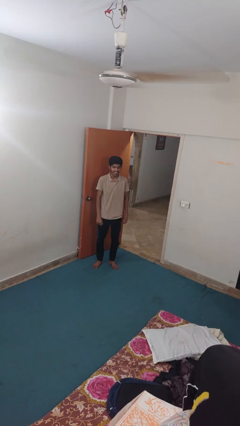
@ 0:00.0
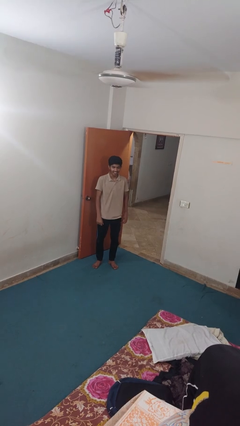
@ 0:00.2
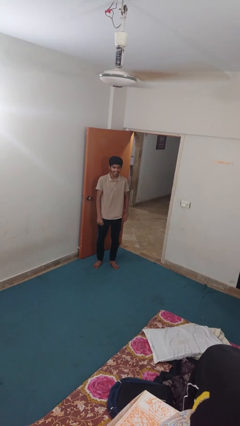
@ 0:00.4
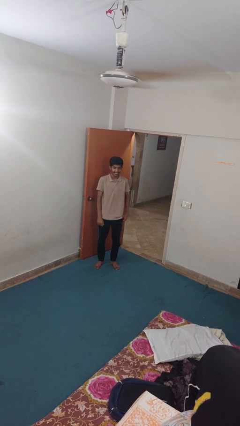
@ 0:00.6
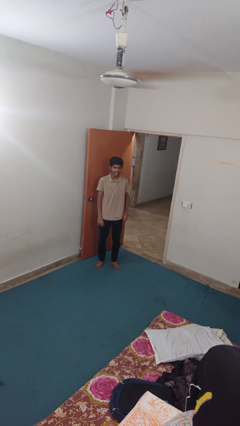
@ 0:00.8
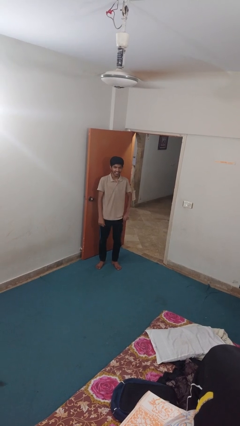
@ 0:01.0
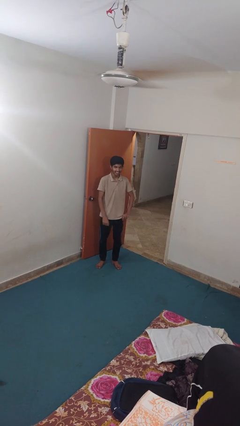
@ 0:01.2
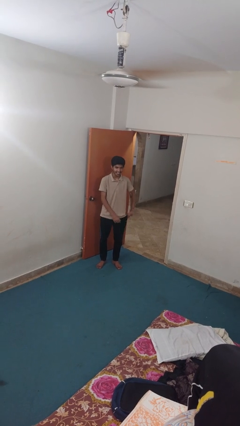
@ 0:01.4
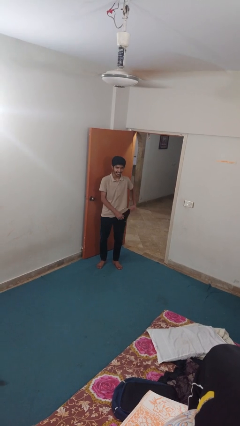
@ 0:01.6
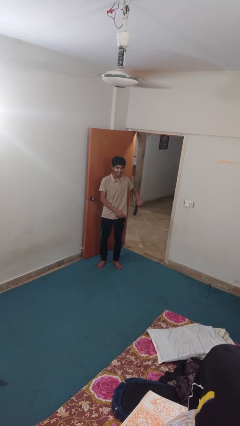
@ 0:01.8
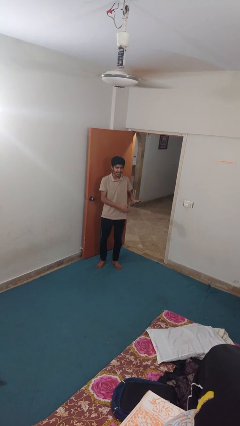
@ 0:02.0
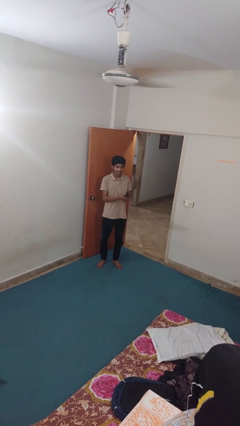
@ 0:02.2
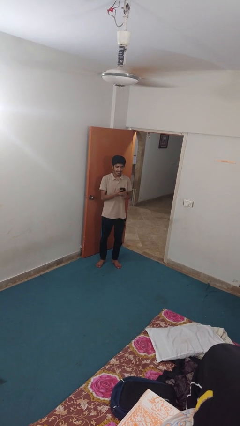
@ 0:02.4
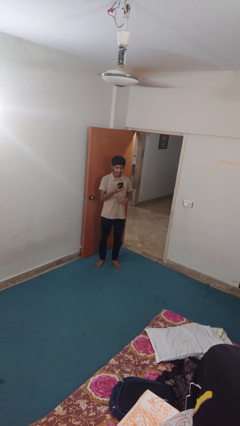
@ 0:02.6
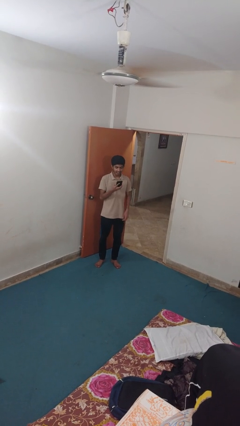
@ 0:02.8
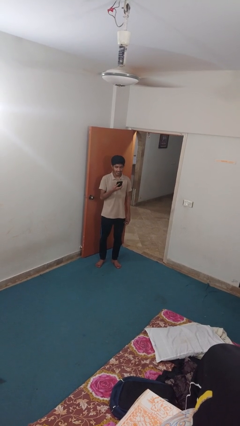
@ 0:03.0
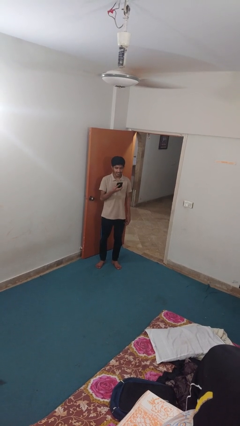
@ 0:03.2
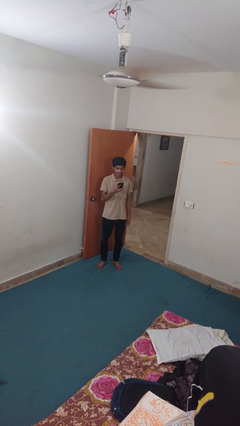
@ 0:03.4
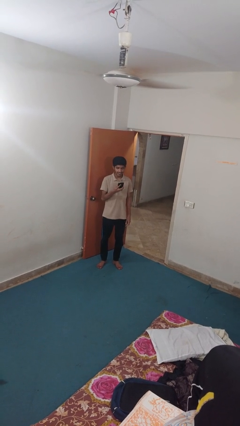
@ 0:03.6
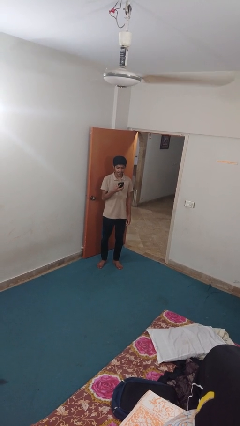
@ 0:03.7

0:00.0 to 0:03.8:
person takes phone from pocket

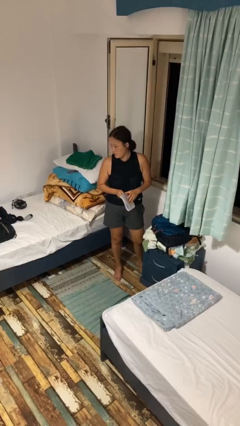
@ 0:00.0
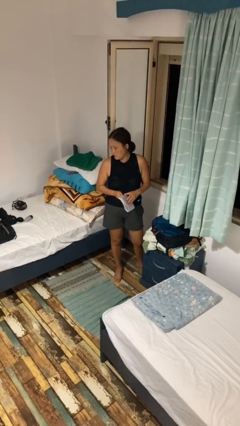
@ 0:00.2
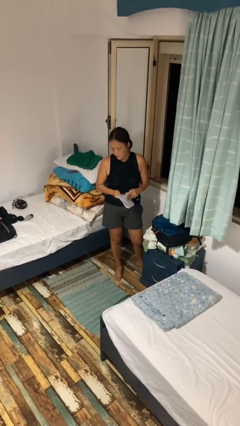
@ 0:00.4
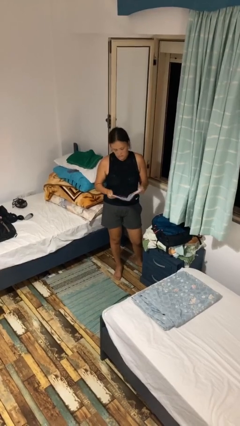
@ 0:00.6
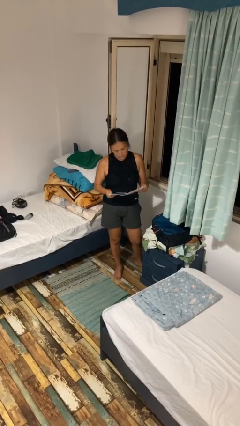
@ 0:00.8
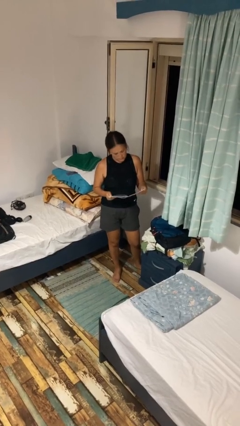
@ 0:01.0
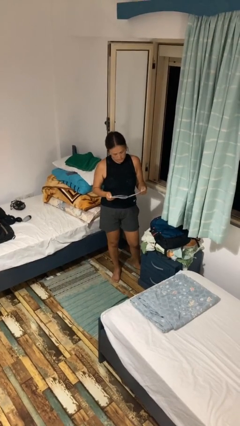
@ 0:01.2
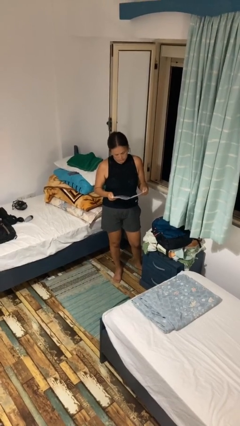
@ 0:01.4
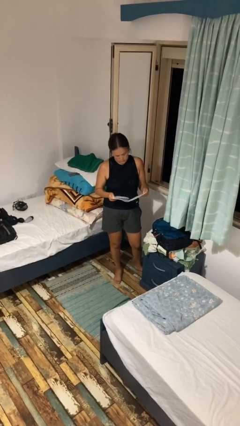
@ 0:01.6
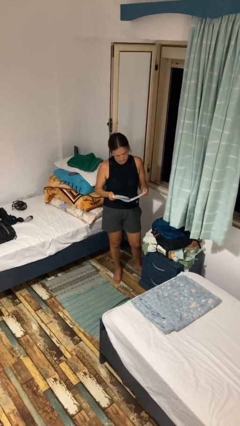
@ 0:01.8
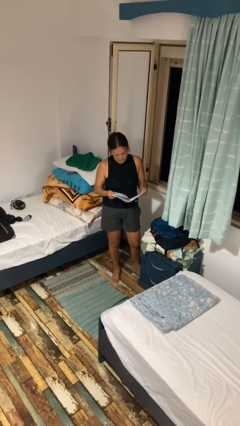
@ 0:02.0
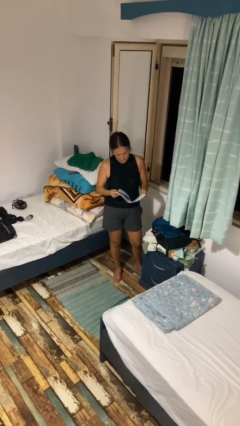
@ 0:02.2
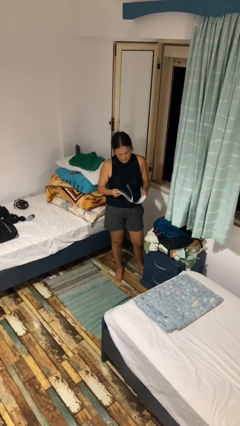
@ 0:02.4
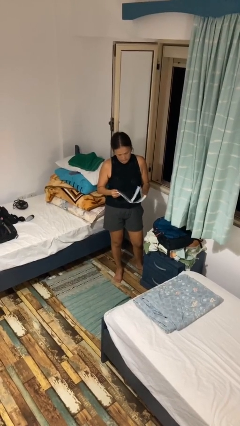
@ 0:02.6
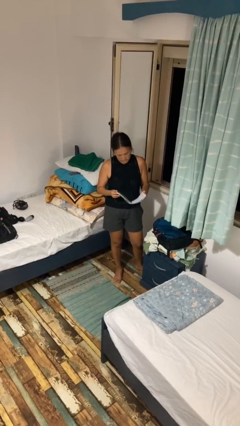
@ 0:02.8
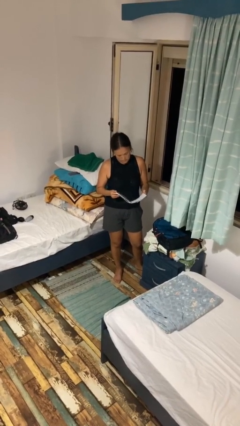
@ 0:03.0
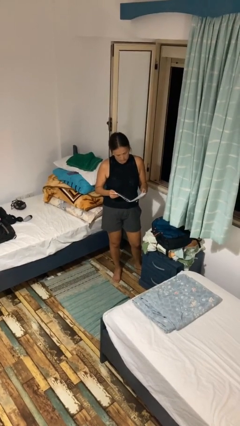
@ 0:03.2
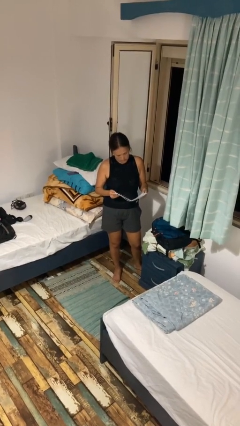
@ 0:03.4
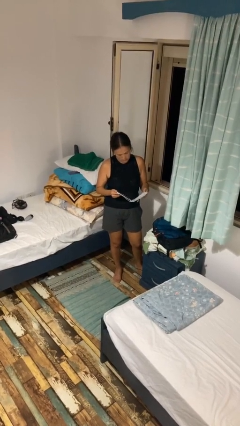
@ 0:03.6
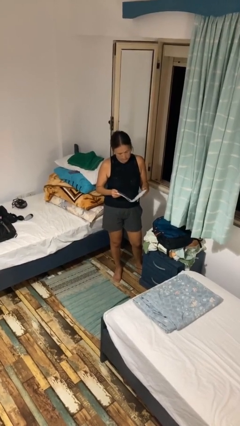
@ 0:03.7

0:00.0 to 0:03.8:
person reads book

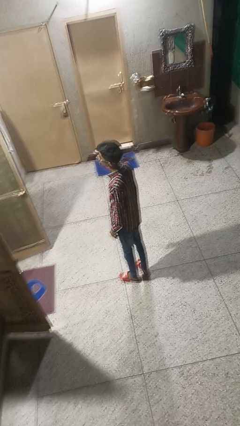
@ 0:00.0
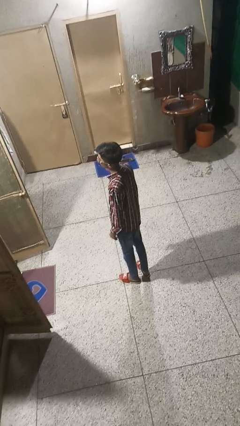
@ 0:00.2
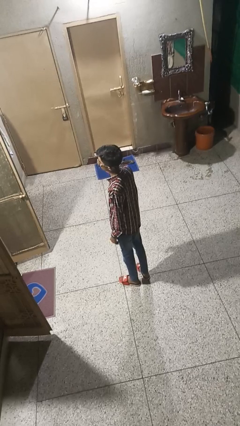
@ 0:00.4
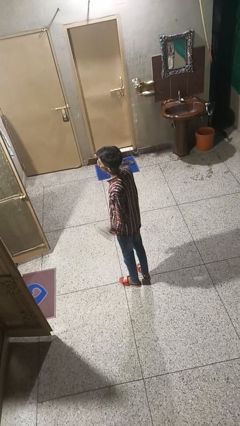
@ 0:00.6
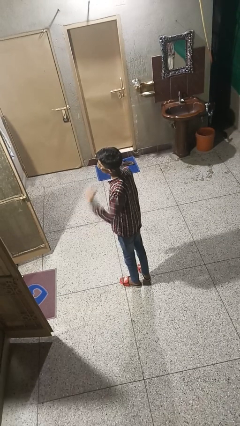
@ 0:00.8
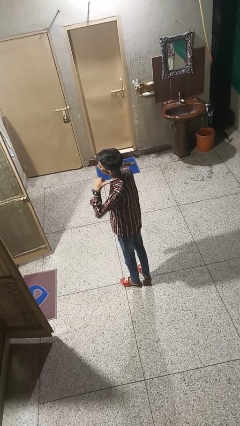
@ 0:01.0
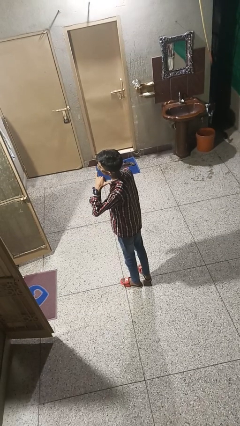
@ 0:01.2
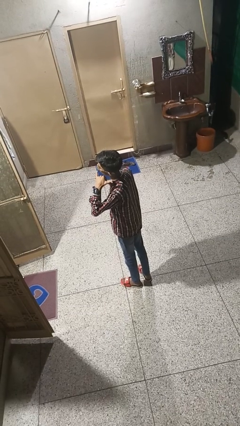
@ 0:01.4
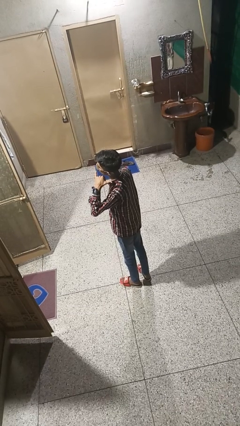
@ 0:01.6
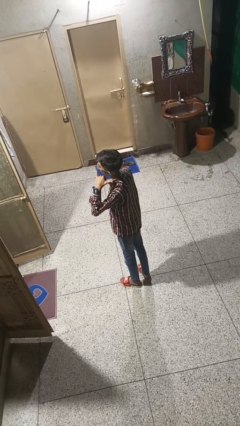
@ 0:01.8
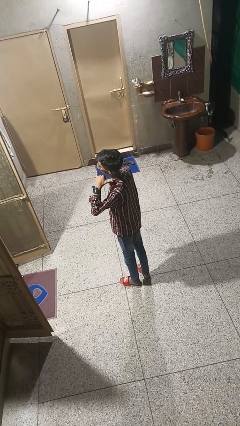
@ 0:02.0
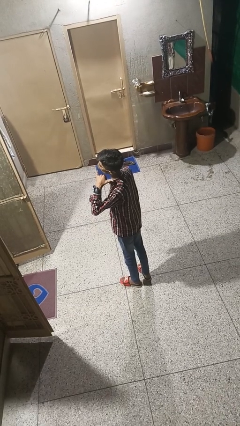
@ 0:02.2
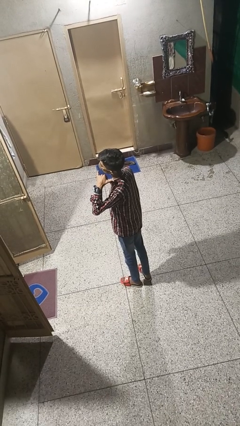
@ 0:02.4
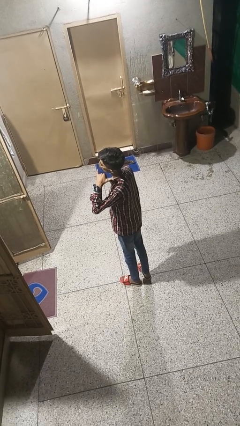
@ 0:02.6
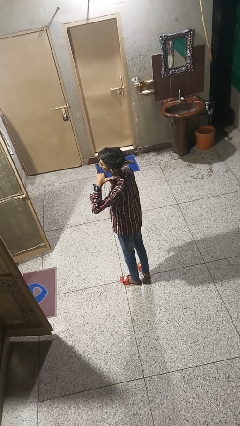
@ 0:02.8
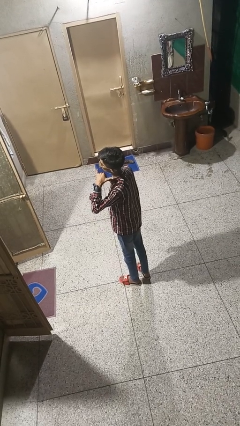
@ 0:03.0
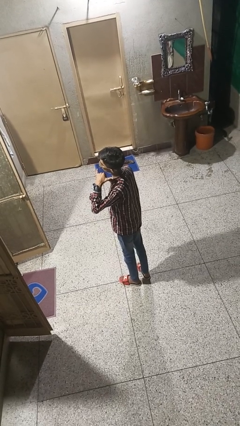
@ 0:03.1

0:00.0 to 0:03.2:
person gestures call me

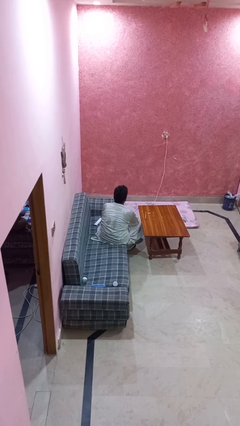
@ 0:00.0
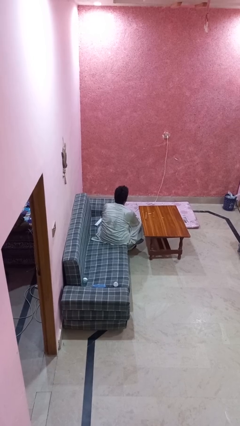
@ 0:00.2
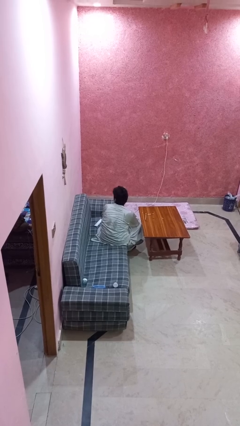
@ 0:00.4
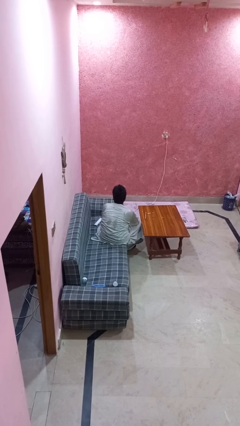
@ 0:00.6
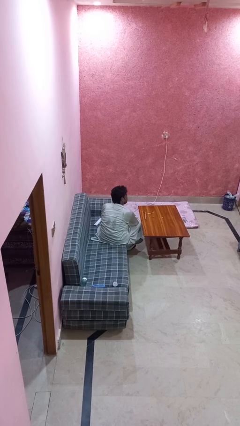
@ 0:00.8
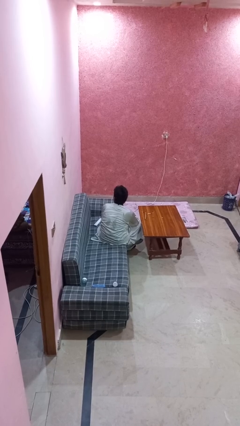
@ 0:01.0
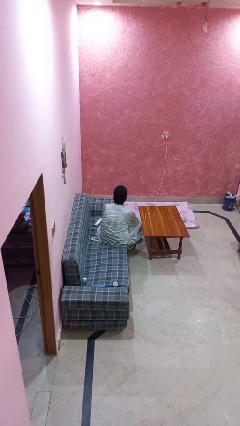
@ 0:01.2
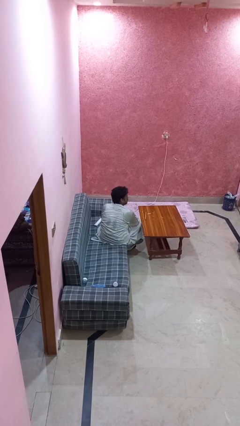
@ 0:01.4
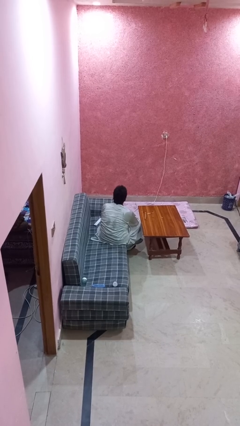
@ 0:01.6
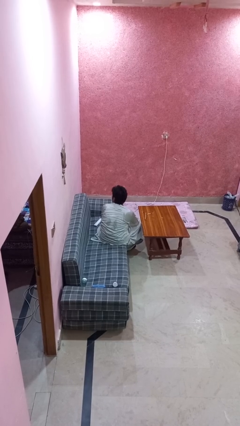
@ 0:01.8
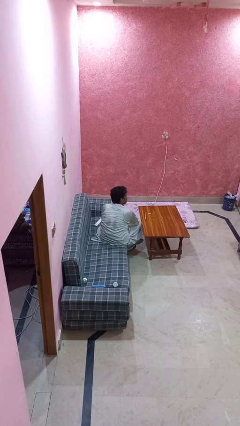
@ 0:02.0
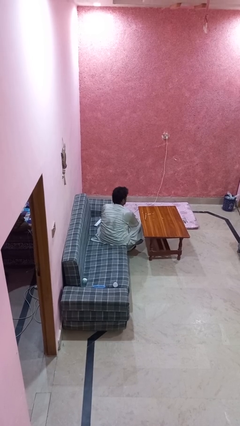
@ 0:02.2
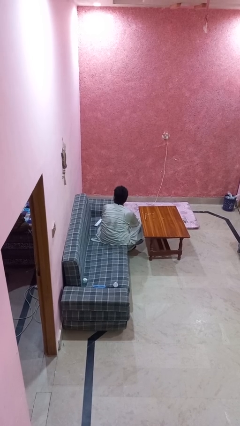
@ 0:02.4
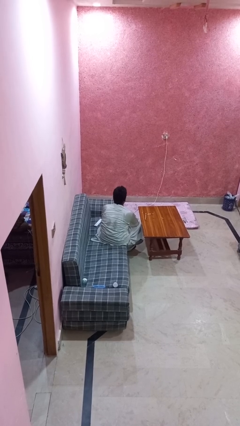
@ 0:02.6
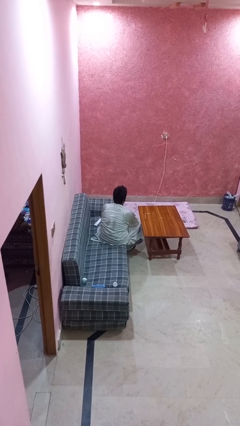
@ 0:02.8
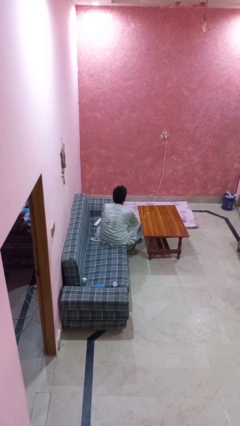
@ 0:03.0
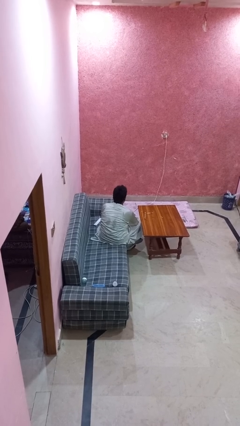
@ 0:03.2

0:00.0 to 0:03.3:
person shakes head

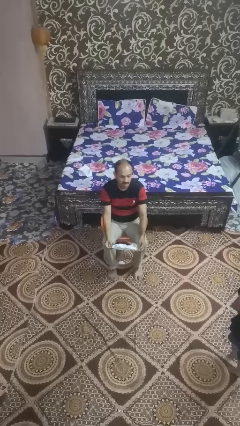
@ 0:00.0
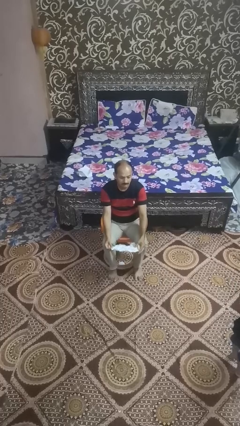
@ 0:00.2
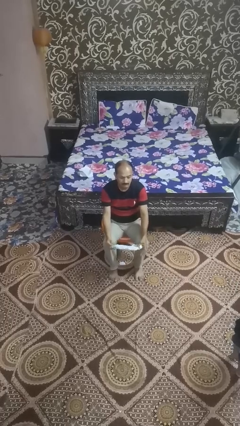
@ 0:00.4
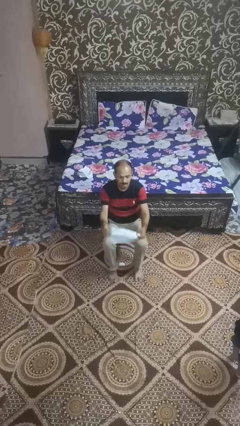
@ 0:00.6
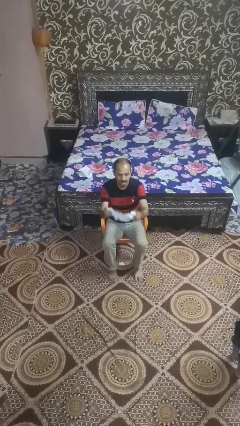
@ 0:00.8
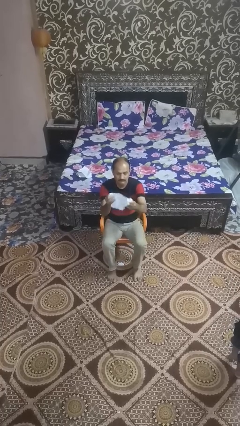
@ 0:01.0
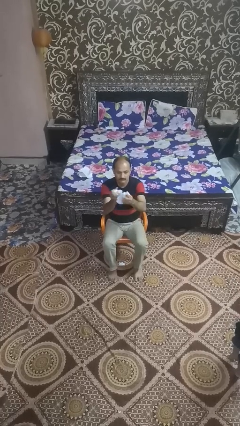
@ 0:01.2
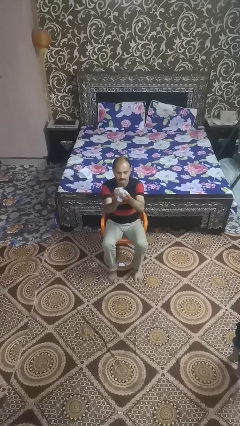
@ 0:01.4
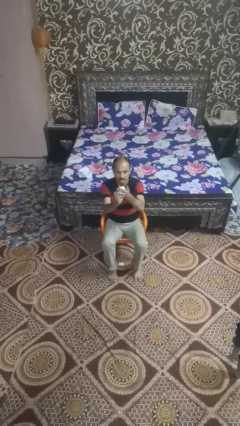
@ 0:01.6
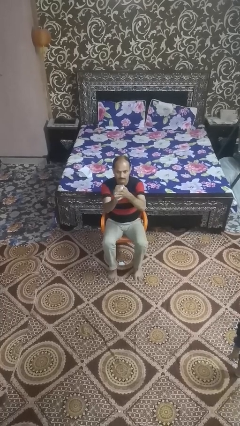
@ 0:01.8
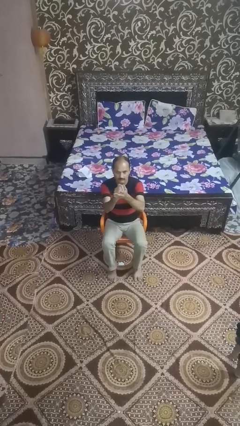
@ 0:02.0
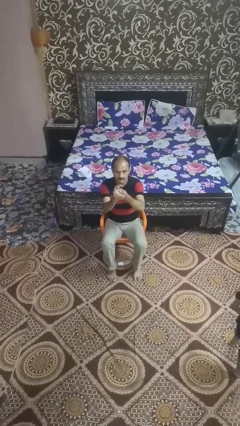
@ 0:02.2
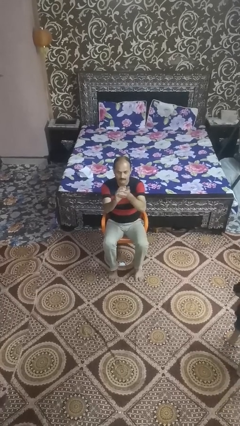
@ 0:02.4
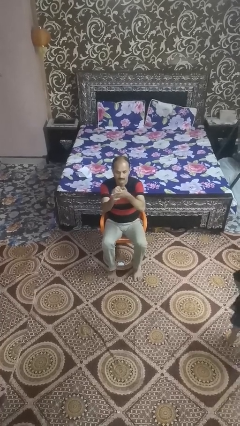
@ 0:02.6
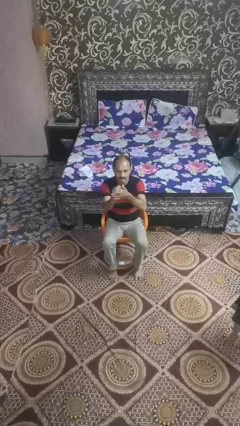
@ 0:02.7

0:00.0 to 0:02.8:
person crumples paper

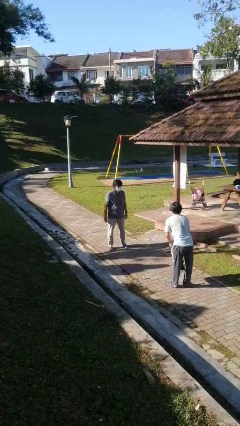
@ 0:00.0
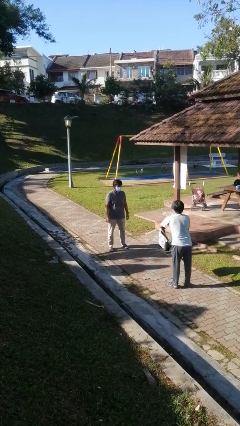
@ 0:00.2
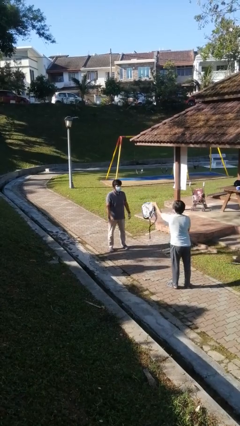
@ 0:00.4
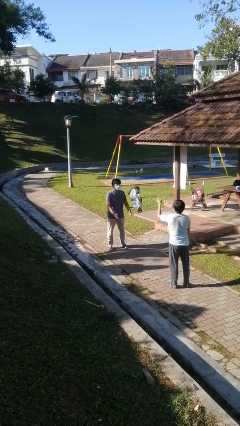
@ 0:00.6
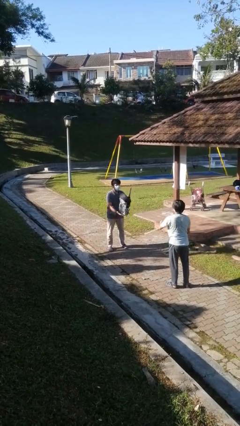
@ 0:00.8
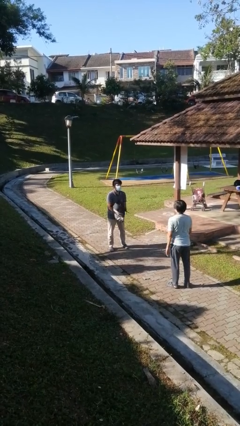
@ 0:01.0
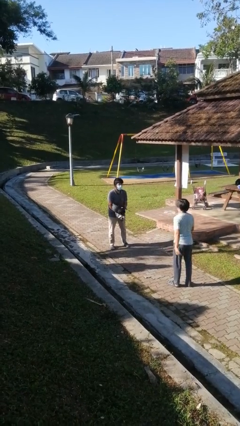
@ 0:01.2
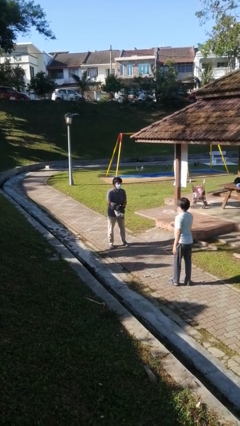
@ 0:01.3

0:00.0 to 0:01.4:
person catches object from person
